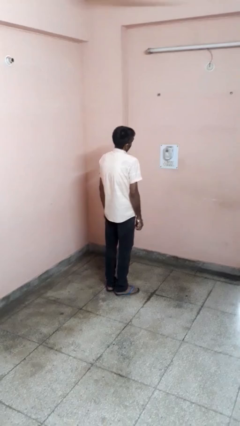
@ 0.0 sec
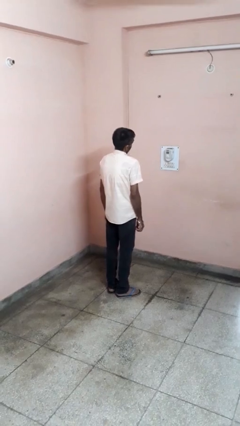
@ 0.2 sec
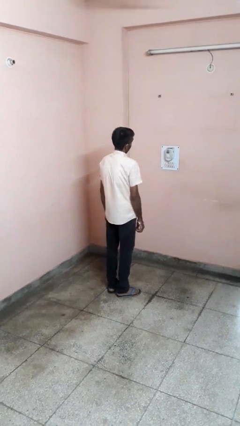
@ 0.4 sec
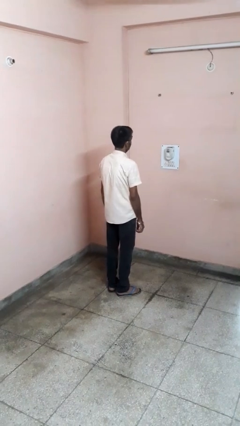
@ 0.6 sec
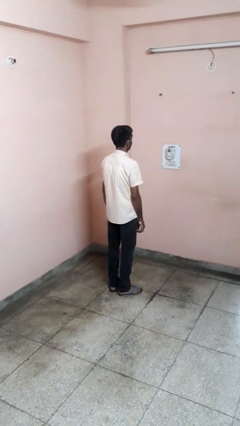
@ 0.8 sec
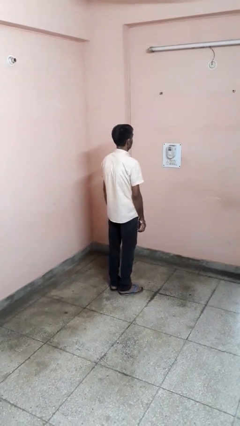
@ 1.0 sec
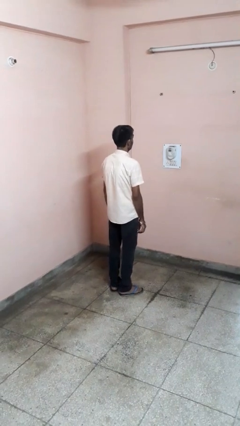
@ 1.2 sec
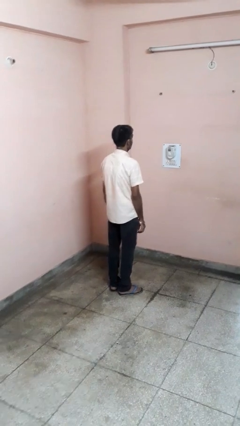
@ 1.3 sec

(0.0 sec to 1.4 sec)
person shrugs

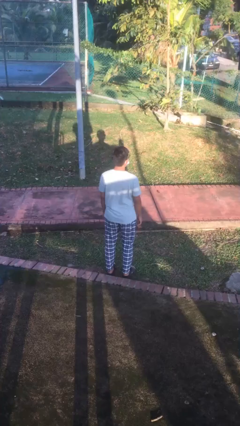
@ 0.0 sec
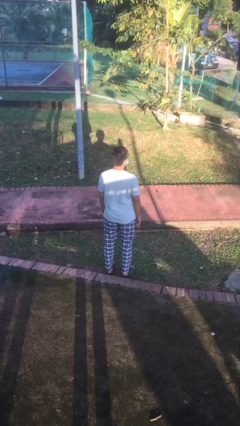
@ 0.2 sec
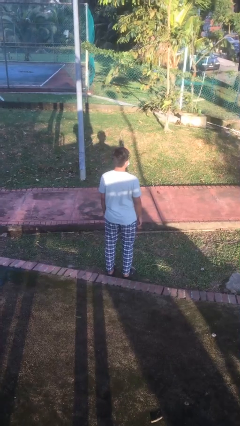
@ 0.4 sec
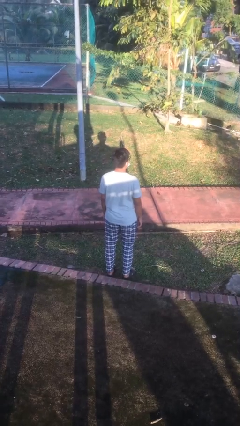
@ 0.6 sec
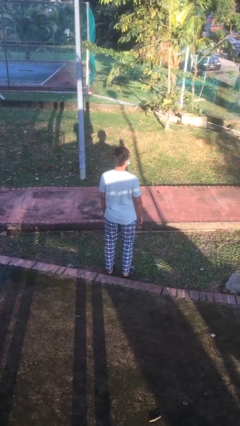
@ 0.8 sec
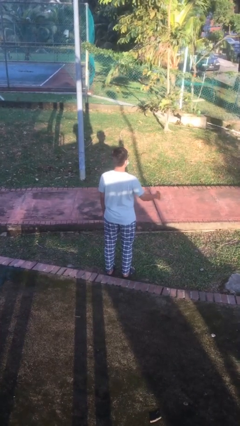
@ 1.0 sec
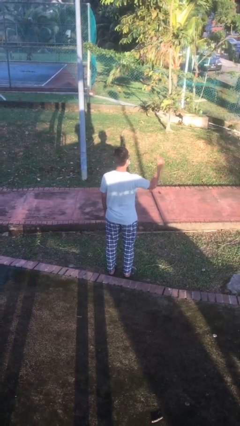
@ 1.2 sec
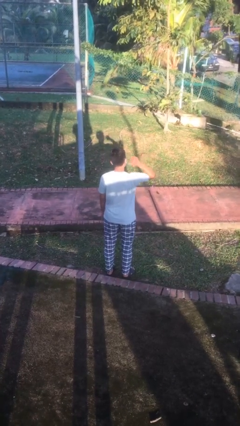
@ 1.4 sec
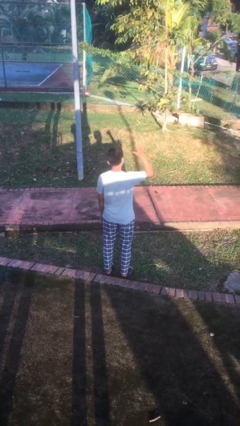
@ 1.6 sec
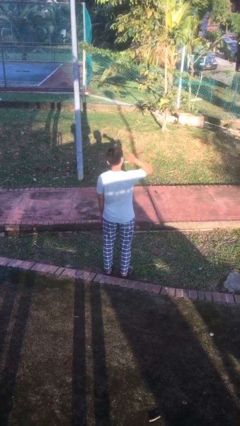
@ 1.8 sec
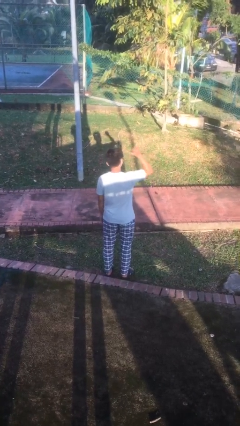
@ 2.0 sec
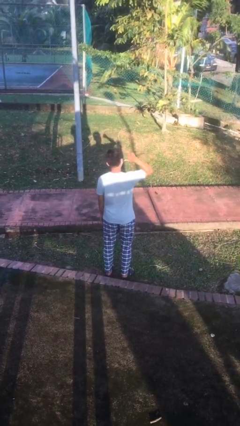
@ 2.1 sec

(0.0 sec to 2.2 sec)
person gestures behind me

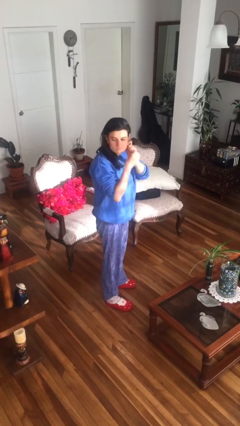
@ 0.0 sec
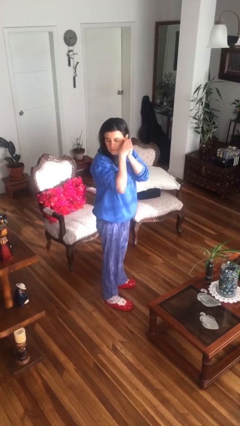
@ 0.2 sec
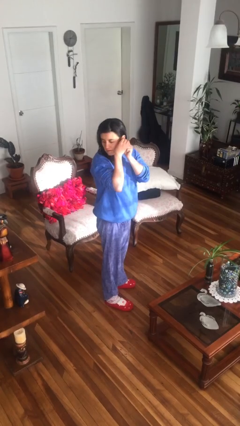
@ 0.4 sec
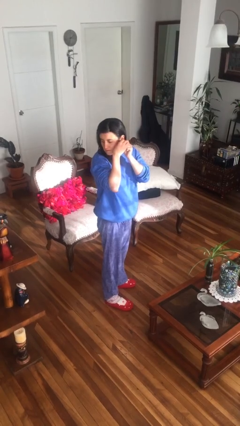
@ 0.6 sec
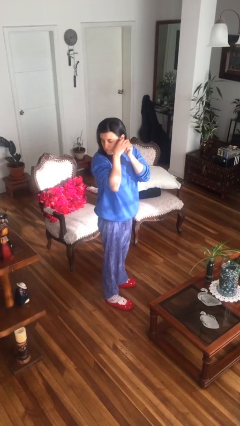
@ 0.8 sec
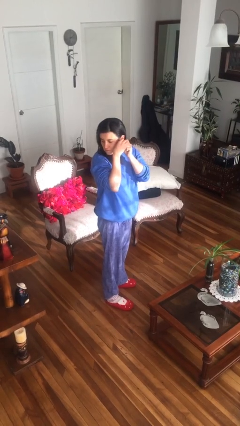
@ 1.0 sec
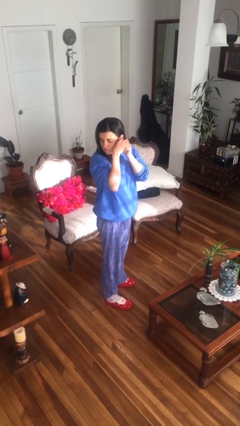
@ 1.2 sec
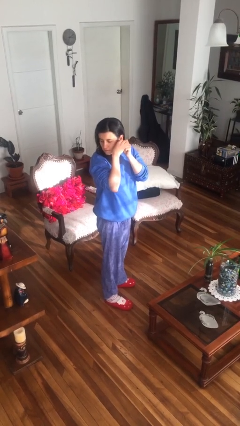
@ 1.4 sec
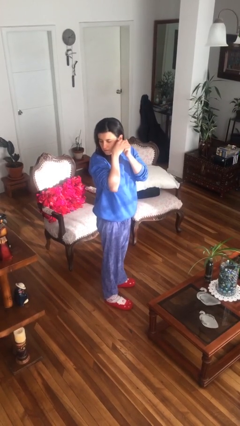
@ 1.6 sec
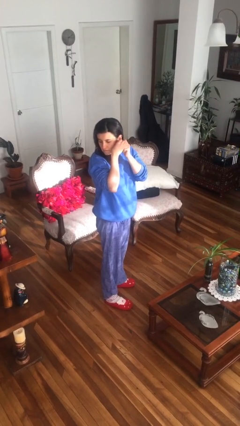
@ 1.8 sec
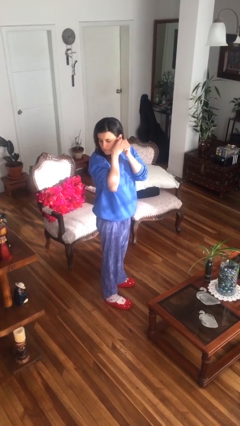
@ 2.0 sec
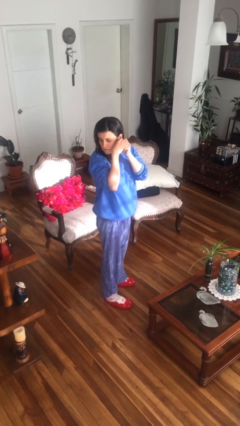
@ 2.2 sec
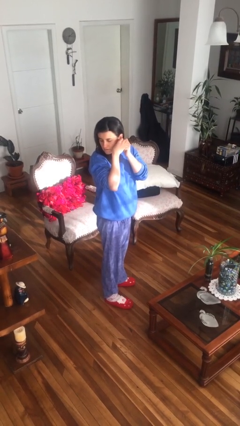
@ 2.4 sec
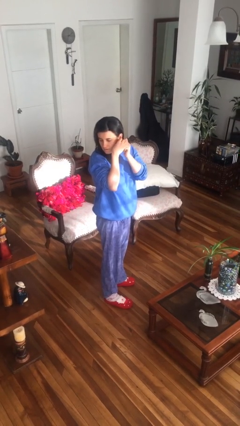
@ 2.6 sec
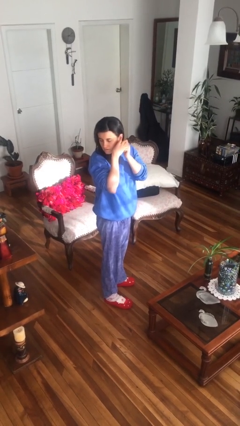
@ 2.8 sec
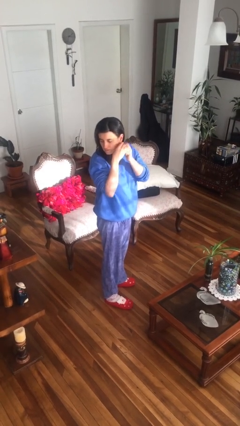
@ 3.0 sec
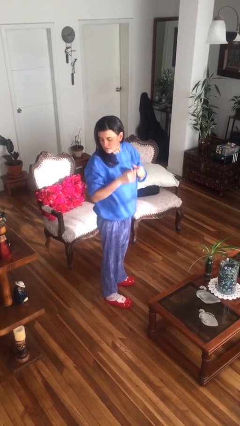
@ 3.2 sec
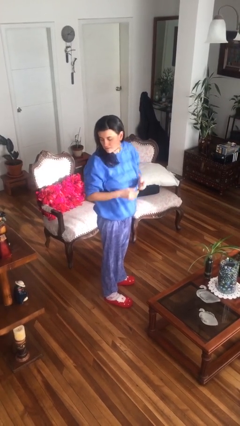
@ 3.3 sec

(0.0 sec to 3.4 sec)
person puts on earrings

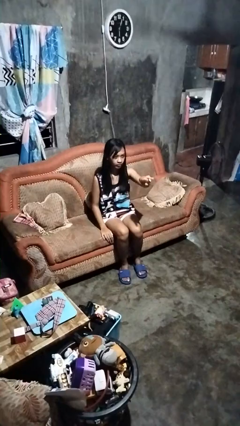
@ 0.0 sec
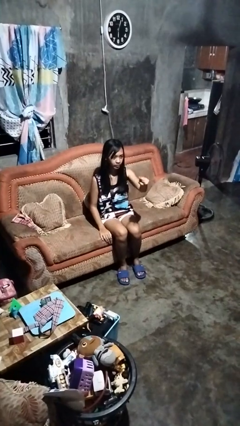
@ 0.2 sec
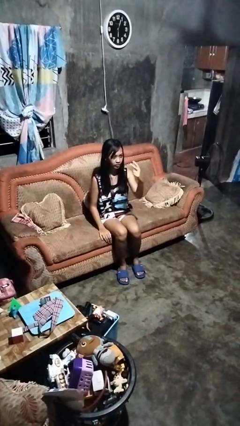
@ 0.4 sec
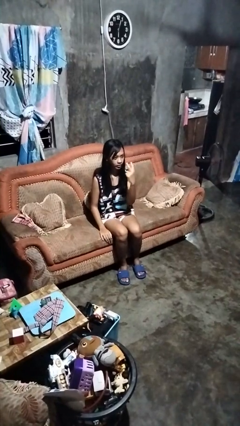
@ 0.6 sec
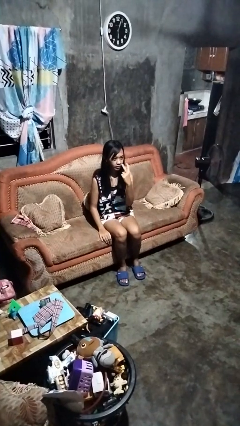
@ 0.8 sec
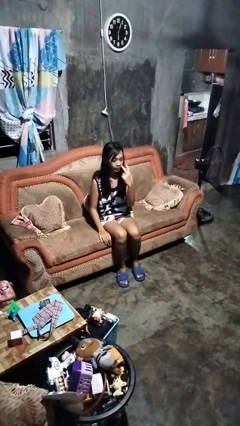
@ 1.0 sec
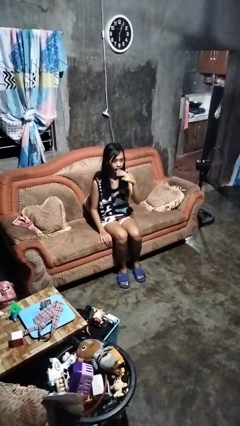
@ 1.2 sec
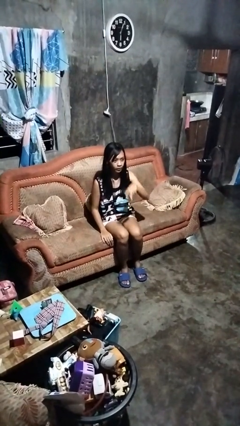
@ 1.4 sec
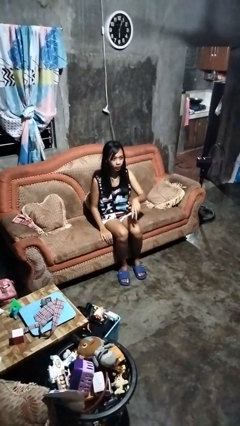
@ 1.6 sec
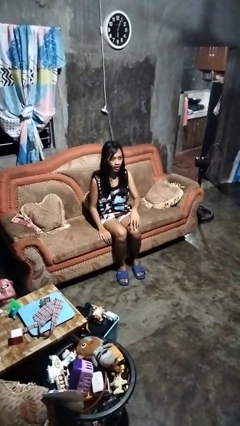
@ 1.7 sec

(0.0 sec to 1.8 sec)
person gestures watch closely

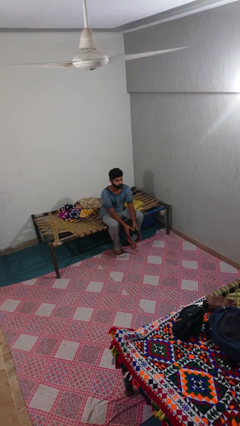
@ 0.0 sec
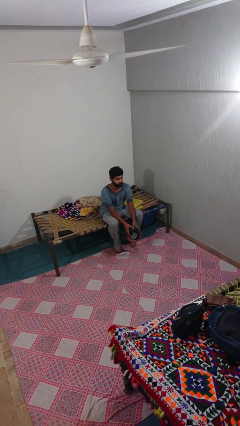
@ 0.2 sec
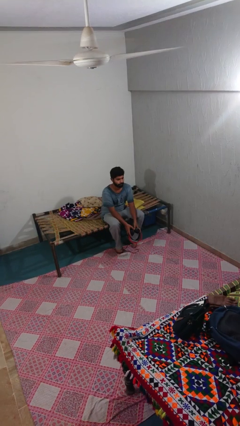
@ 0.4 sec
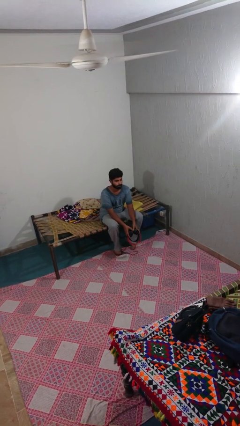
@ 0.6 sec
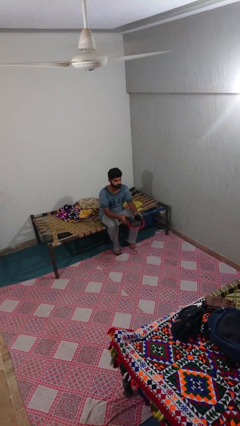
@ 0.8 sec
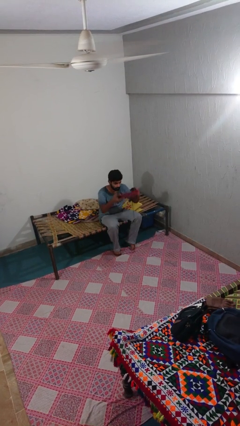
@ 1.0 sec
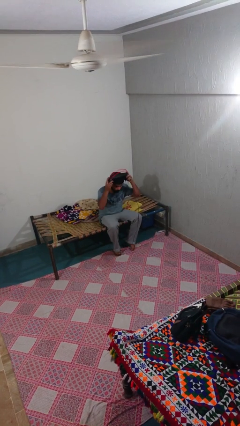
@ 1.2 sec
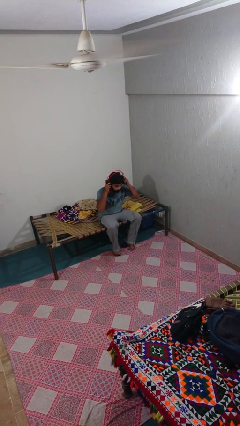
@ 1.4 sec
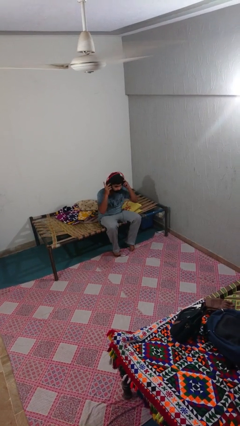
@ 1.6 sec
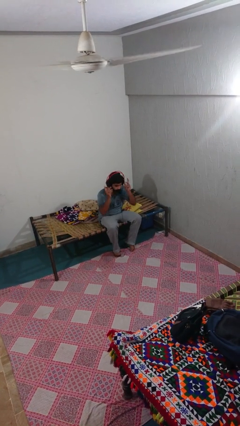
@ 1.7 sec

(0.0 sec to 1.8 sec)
person puts on headphones

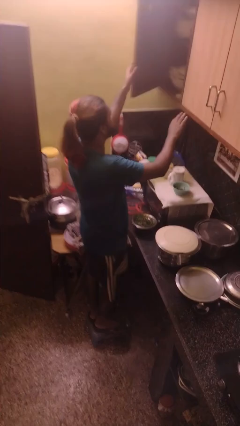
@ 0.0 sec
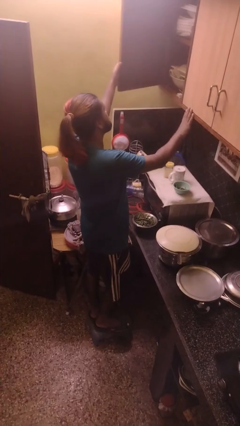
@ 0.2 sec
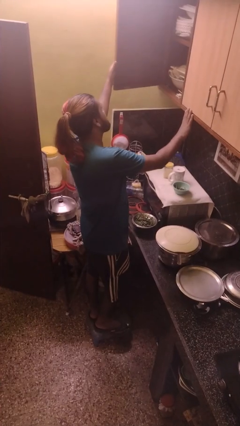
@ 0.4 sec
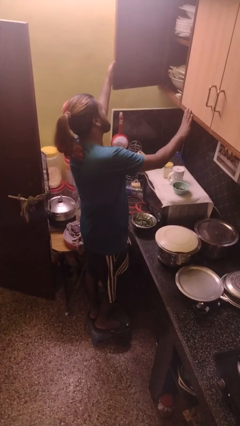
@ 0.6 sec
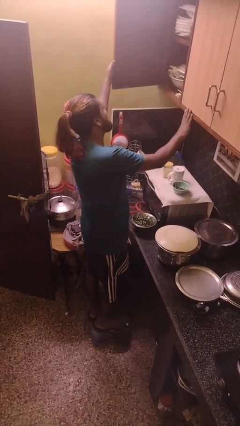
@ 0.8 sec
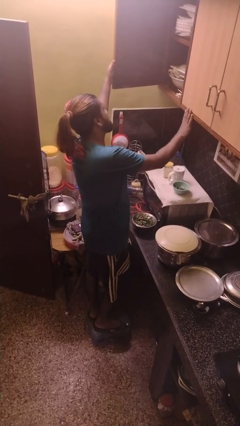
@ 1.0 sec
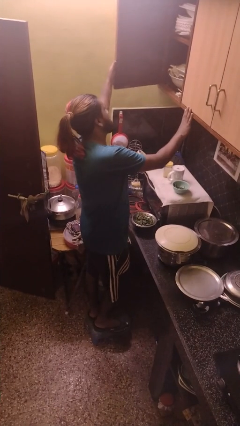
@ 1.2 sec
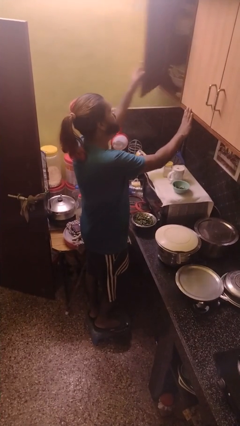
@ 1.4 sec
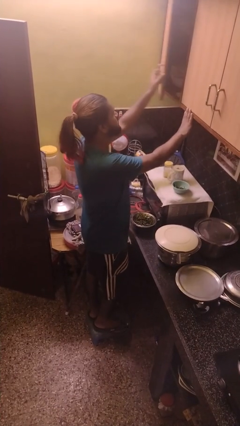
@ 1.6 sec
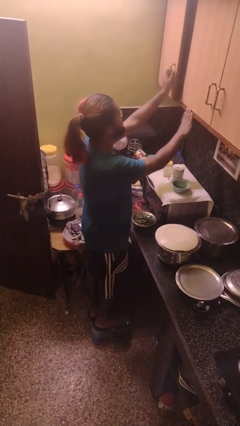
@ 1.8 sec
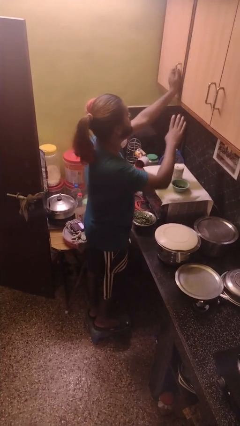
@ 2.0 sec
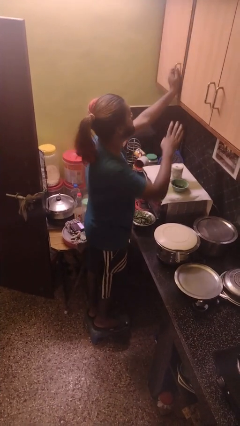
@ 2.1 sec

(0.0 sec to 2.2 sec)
person opens cabinet

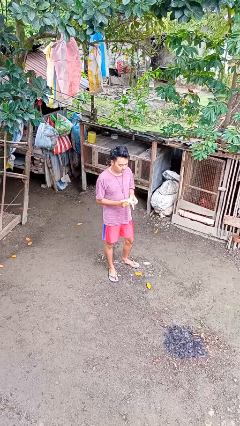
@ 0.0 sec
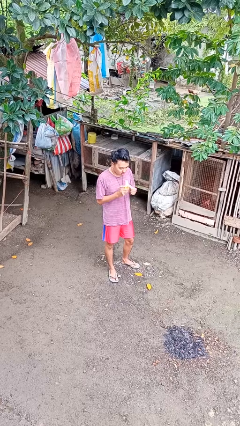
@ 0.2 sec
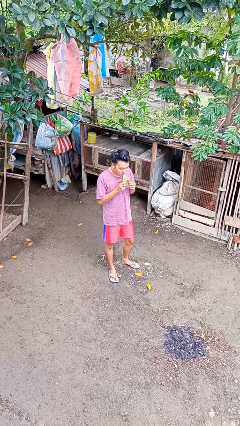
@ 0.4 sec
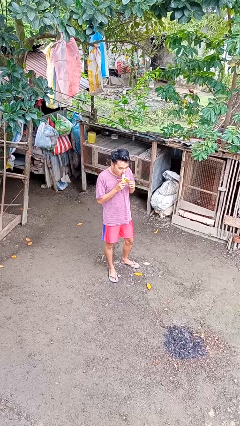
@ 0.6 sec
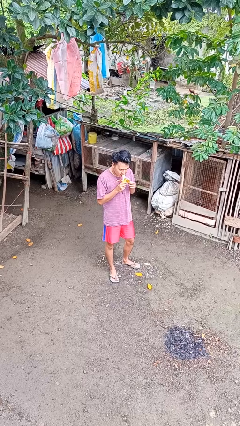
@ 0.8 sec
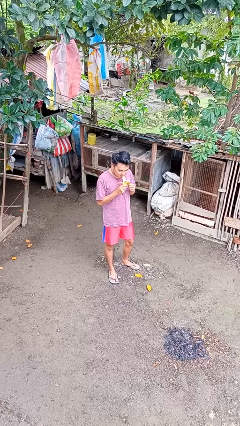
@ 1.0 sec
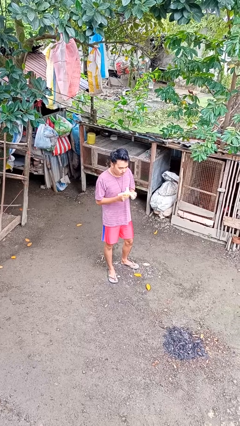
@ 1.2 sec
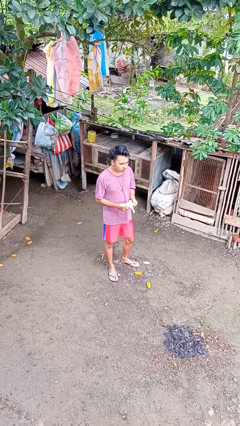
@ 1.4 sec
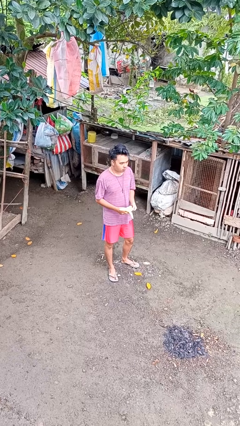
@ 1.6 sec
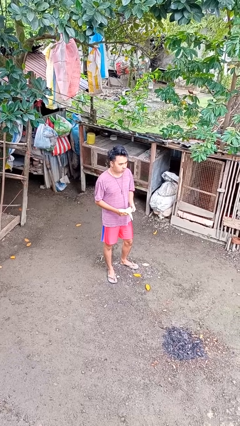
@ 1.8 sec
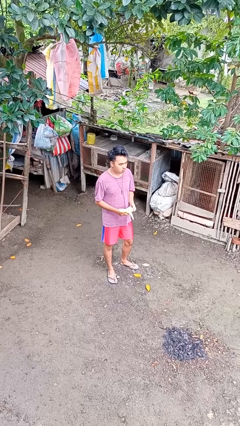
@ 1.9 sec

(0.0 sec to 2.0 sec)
person eats banana

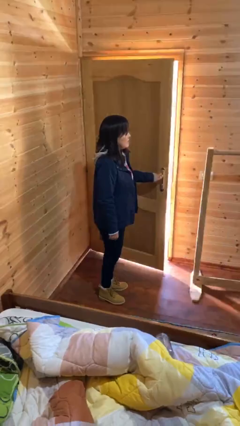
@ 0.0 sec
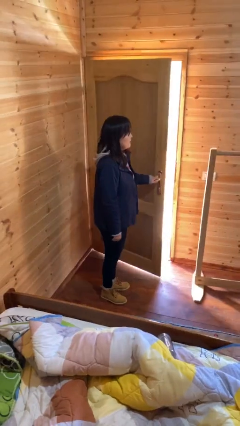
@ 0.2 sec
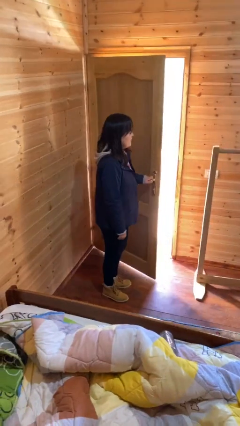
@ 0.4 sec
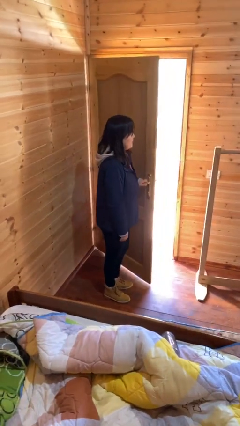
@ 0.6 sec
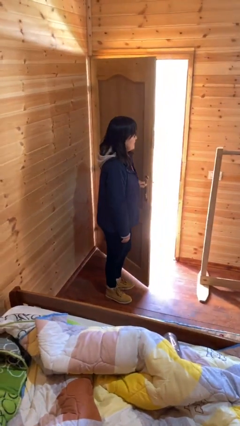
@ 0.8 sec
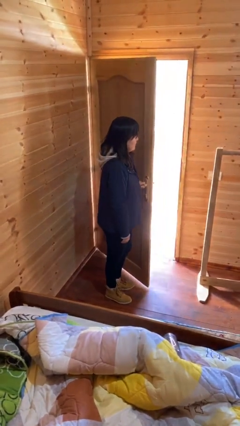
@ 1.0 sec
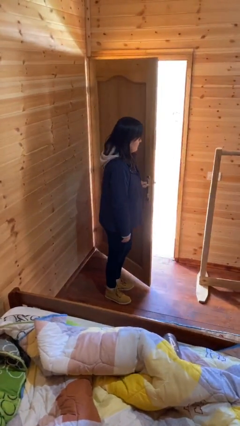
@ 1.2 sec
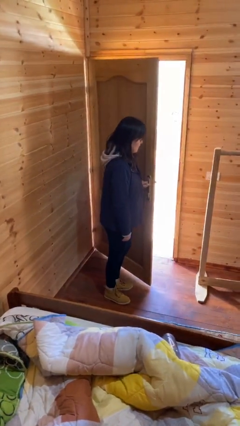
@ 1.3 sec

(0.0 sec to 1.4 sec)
person opens facility door

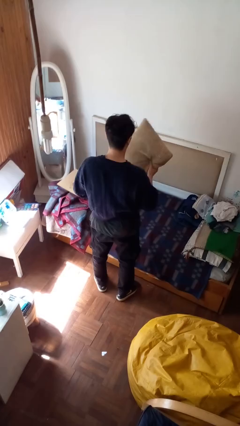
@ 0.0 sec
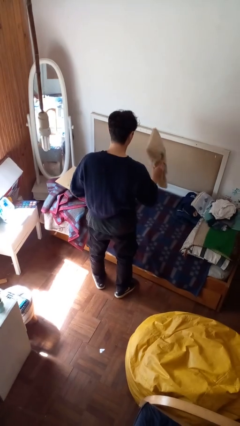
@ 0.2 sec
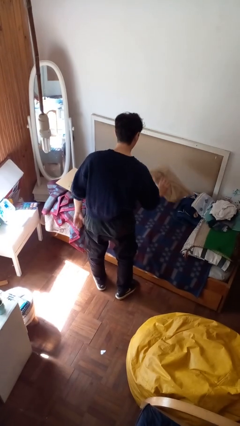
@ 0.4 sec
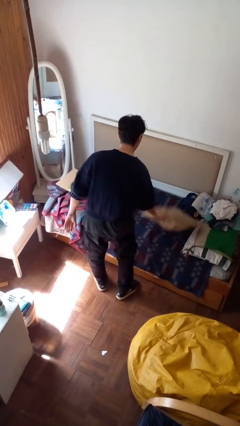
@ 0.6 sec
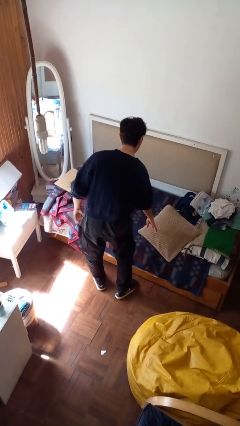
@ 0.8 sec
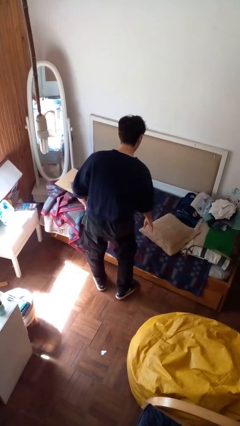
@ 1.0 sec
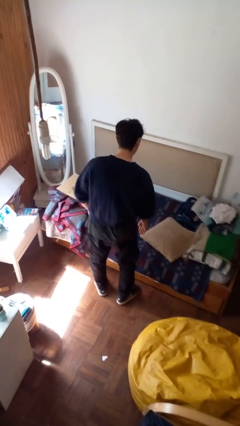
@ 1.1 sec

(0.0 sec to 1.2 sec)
person puts down object on bed
